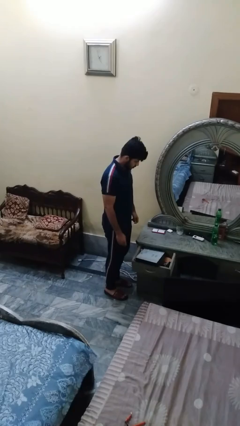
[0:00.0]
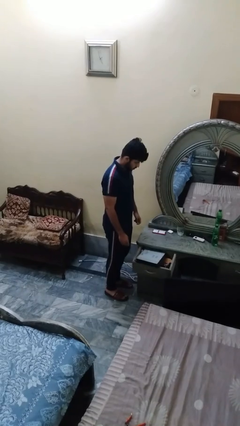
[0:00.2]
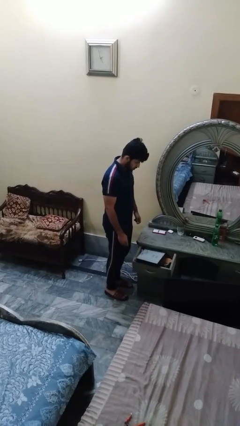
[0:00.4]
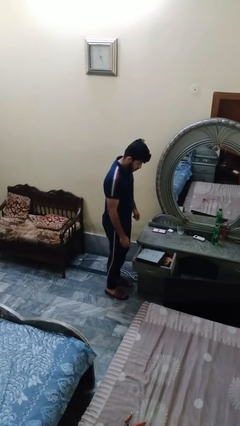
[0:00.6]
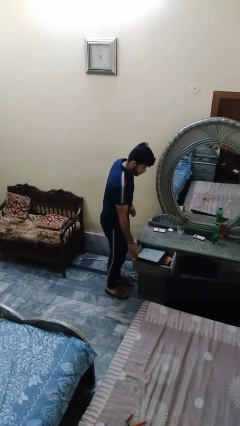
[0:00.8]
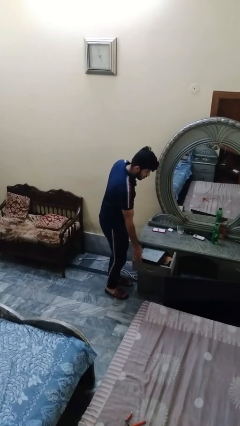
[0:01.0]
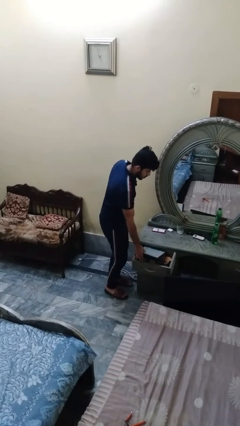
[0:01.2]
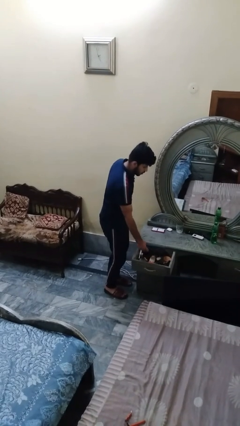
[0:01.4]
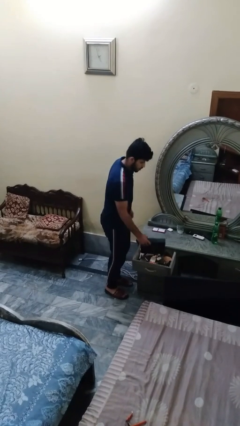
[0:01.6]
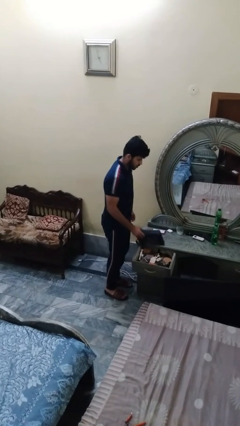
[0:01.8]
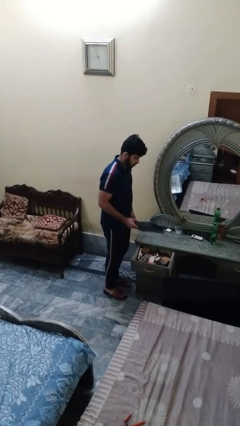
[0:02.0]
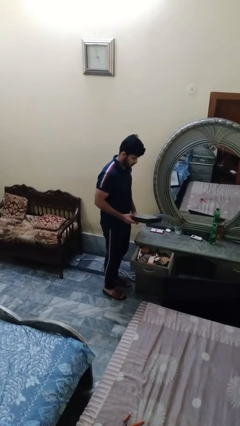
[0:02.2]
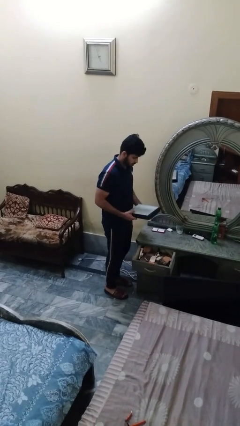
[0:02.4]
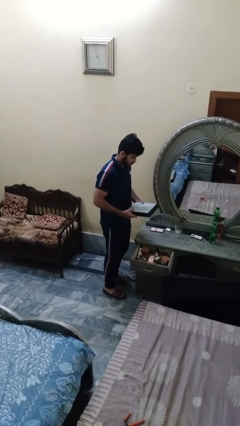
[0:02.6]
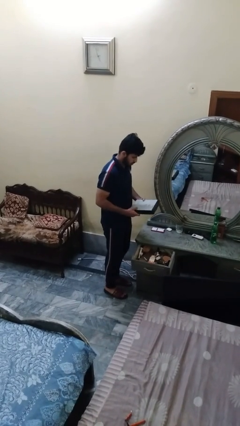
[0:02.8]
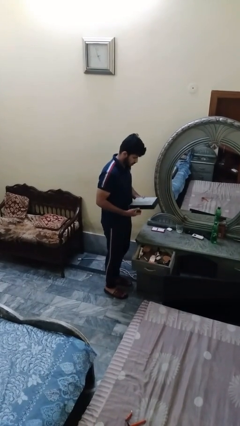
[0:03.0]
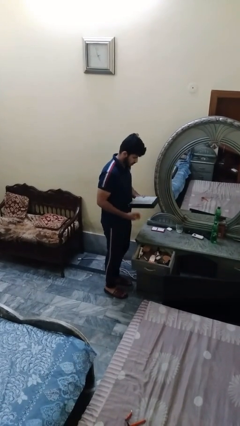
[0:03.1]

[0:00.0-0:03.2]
person picks up object from cabinet

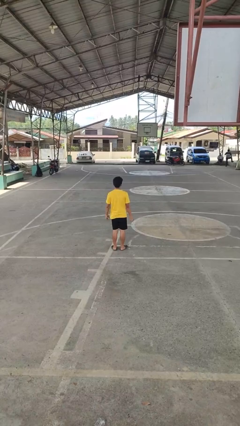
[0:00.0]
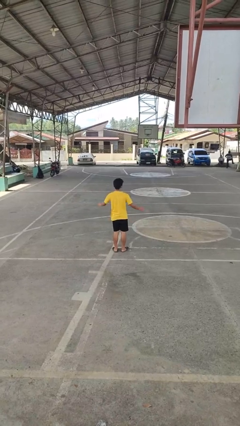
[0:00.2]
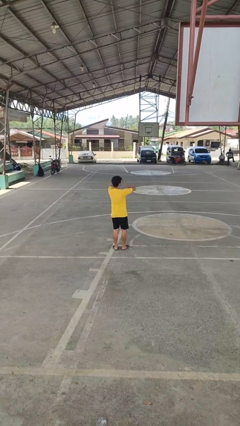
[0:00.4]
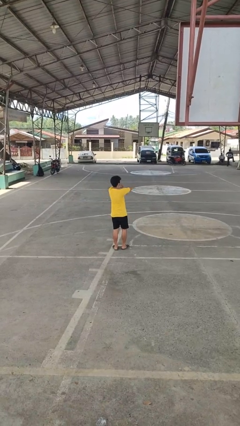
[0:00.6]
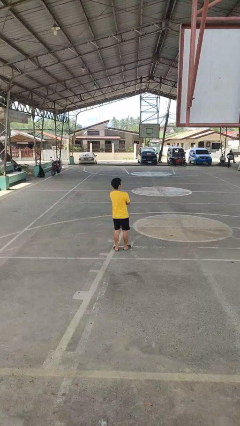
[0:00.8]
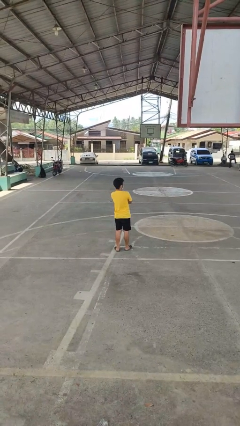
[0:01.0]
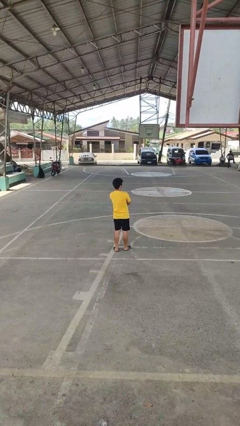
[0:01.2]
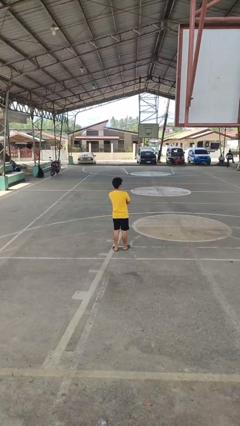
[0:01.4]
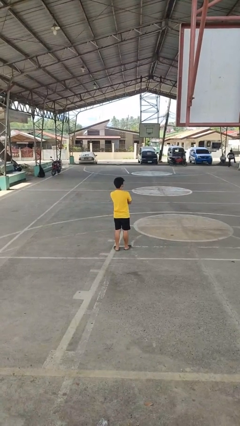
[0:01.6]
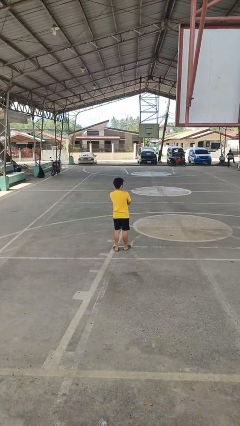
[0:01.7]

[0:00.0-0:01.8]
person crosses arms

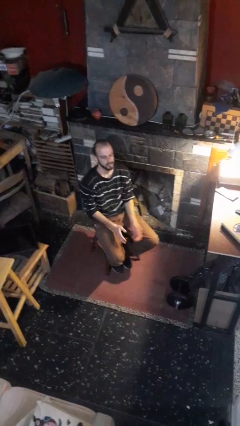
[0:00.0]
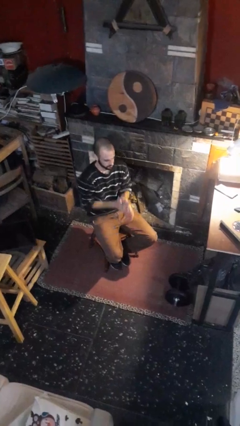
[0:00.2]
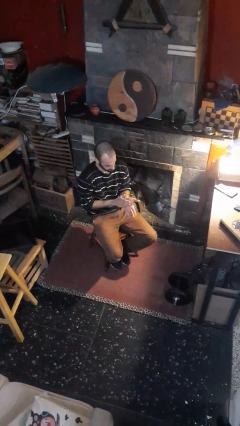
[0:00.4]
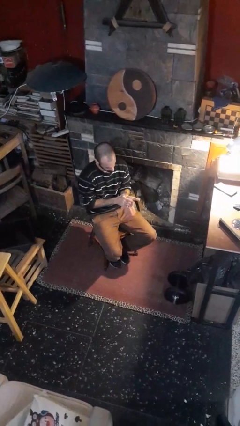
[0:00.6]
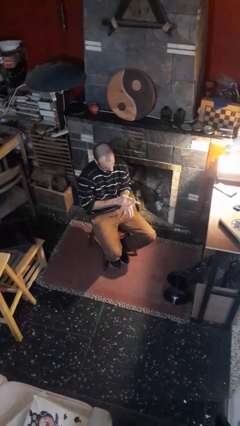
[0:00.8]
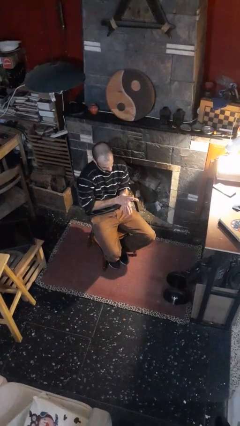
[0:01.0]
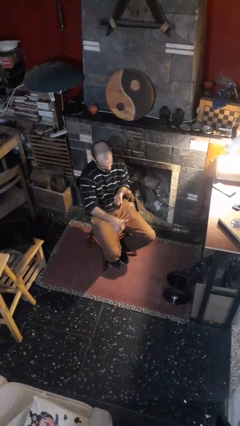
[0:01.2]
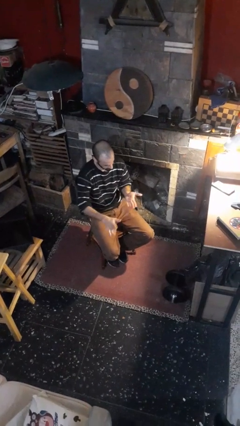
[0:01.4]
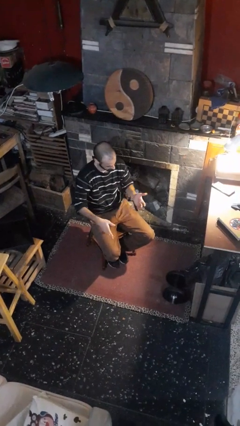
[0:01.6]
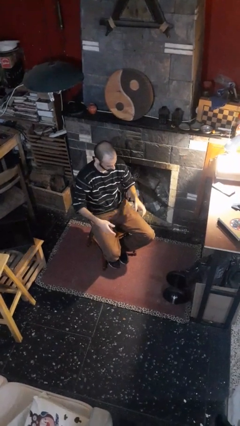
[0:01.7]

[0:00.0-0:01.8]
person swats bug

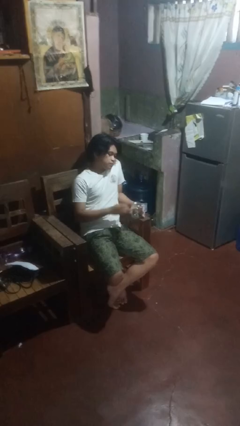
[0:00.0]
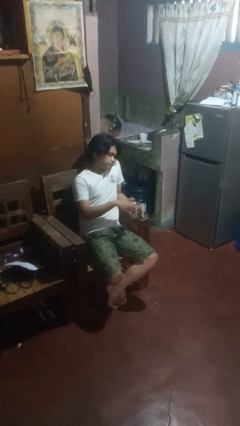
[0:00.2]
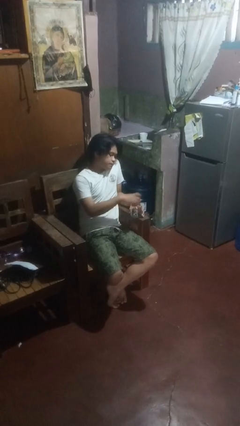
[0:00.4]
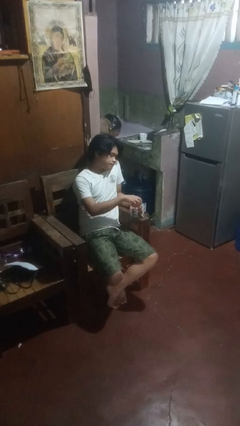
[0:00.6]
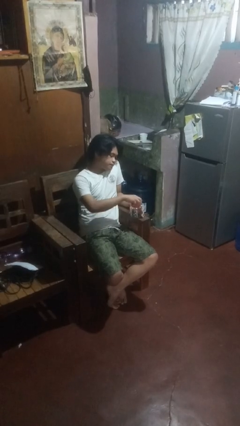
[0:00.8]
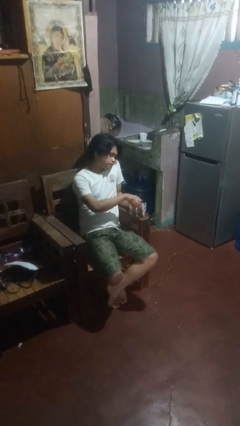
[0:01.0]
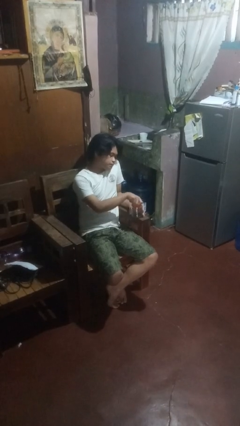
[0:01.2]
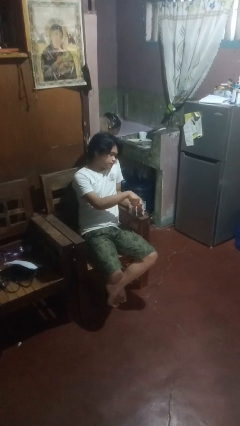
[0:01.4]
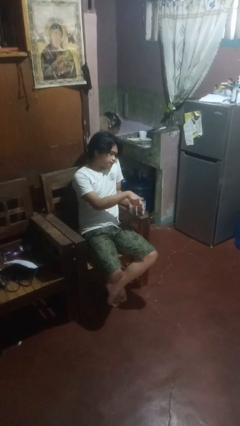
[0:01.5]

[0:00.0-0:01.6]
person closes jar

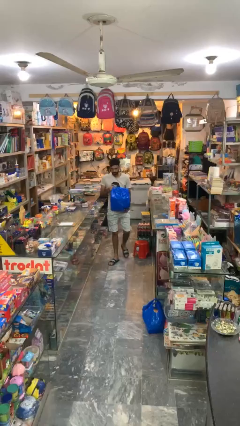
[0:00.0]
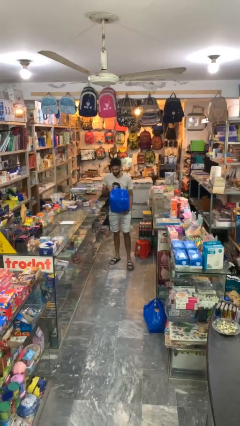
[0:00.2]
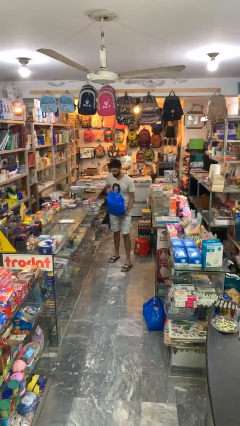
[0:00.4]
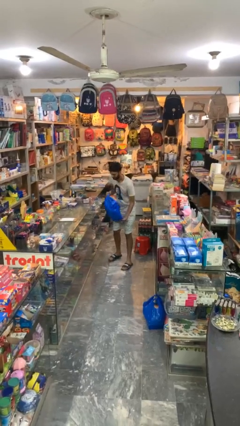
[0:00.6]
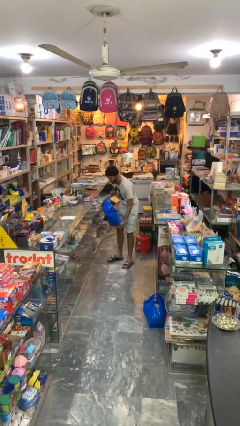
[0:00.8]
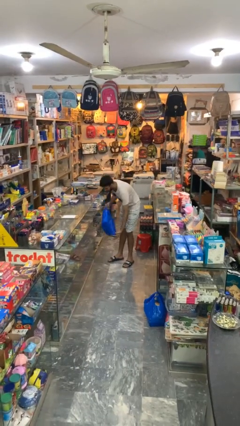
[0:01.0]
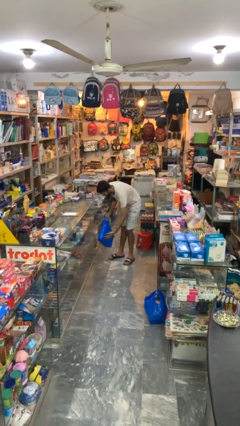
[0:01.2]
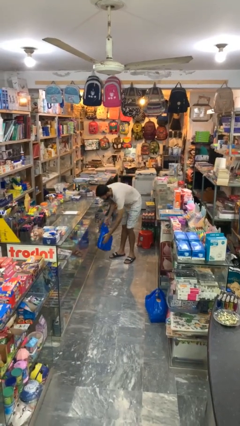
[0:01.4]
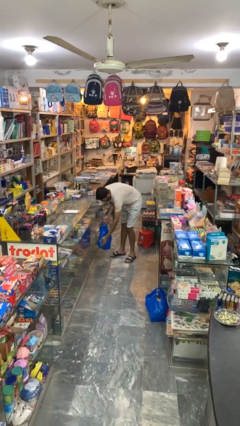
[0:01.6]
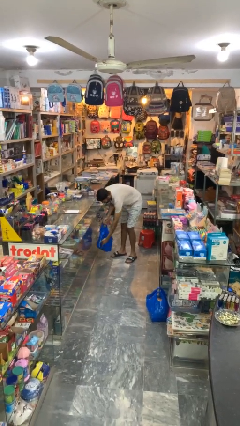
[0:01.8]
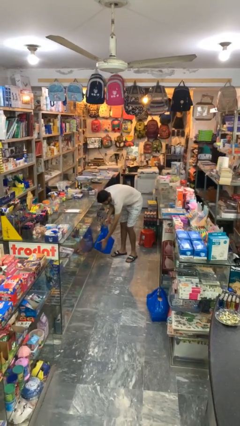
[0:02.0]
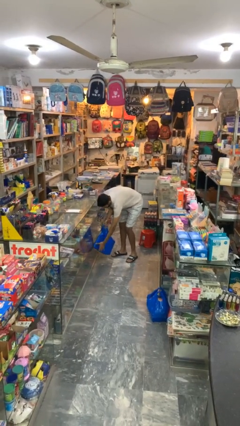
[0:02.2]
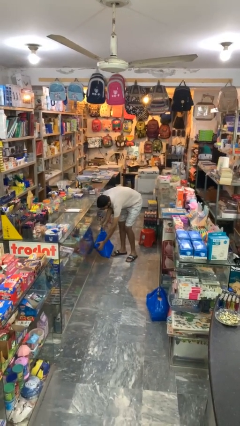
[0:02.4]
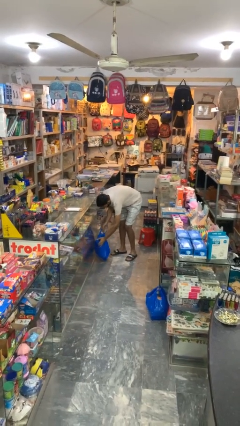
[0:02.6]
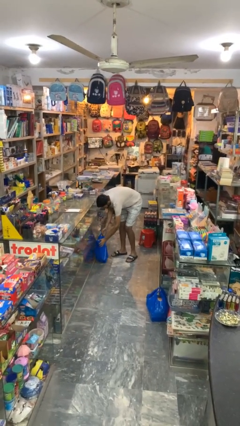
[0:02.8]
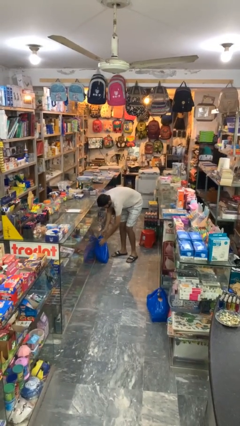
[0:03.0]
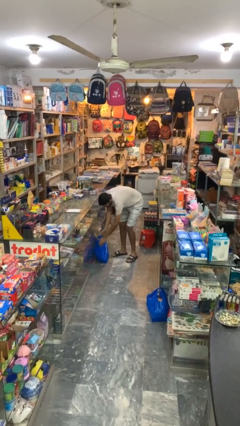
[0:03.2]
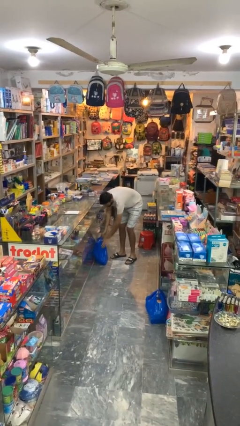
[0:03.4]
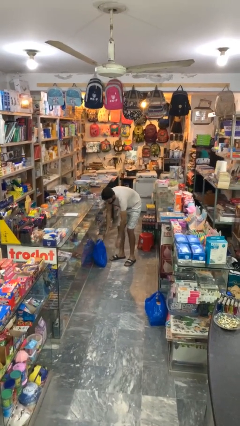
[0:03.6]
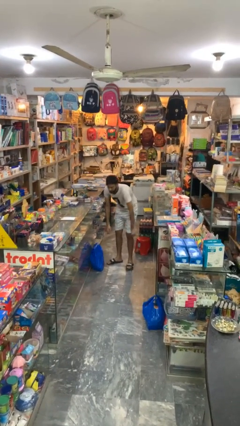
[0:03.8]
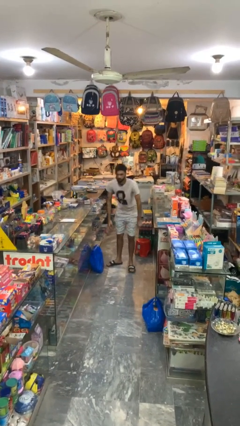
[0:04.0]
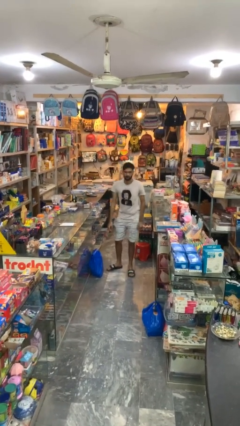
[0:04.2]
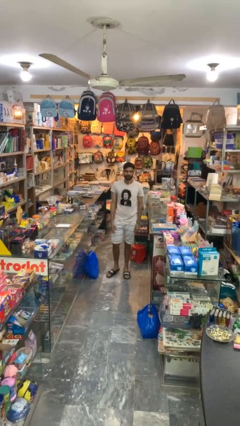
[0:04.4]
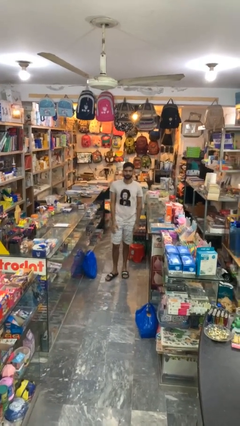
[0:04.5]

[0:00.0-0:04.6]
person puts down object on floor

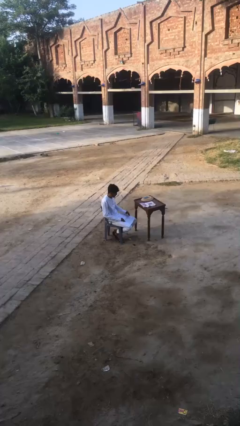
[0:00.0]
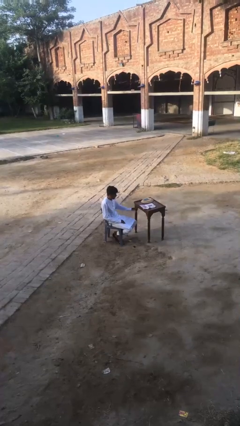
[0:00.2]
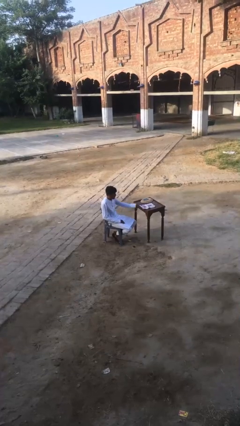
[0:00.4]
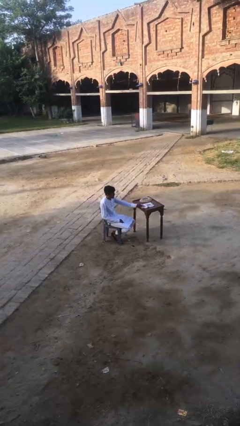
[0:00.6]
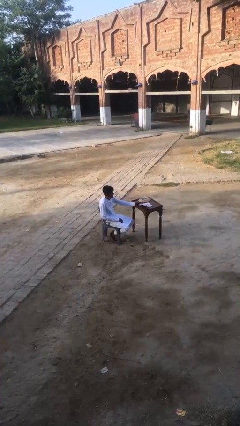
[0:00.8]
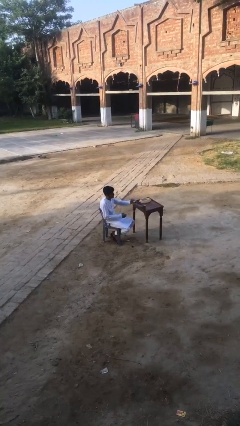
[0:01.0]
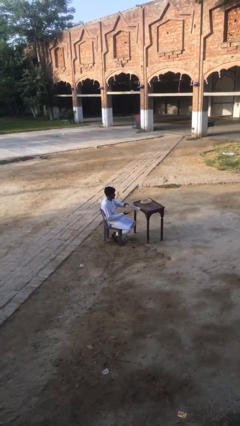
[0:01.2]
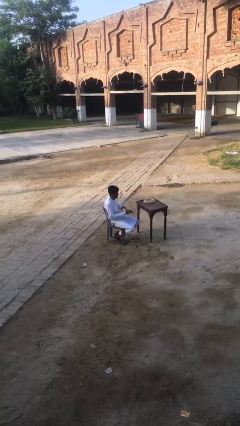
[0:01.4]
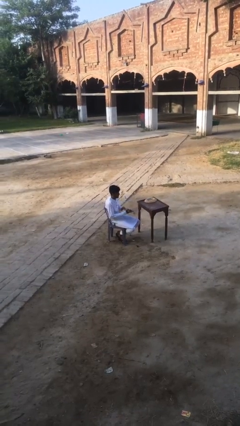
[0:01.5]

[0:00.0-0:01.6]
person picks up object from table

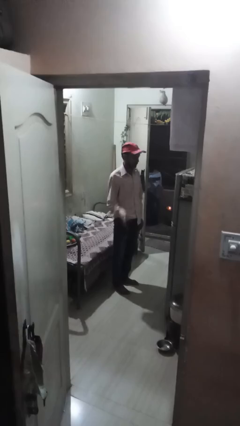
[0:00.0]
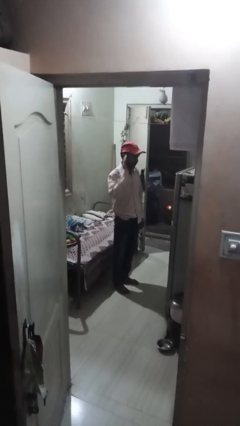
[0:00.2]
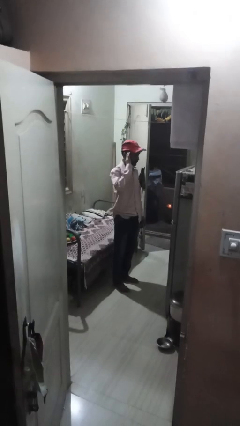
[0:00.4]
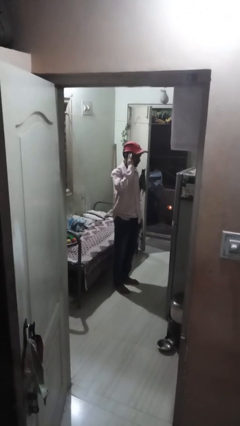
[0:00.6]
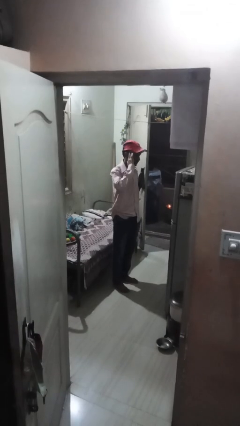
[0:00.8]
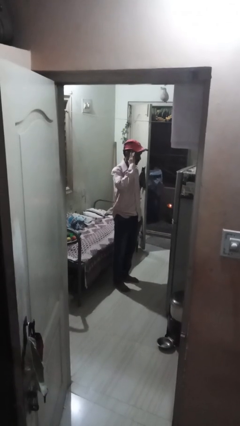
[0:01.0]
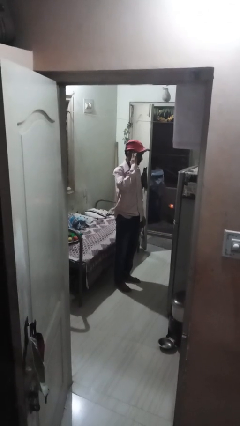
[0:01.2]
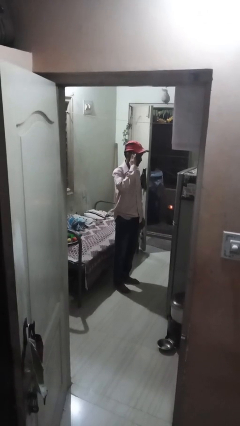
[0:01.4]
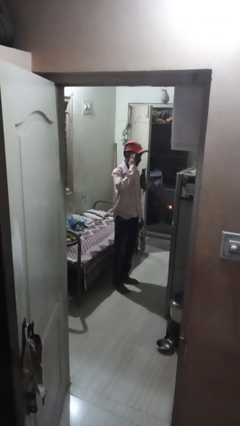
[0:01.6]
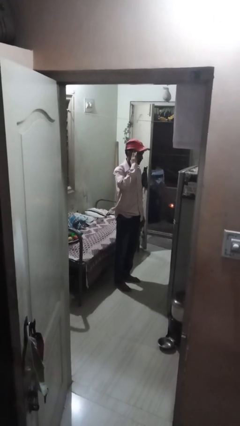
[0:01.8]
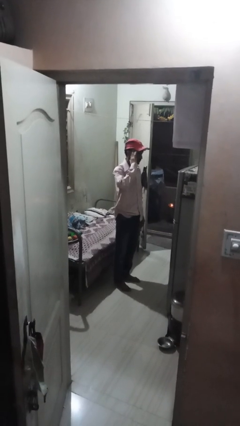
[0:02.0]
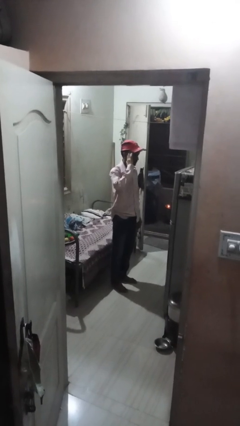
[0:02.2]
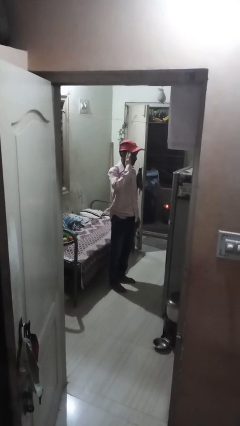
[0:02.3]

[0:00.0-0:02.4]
person salutes
